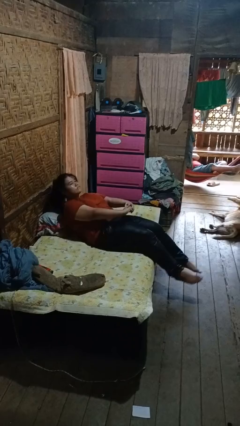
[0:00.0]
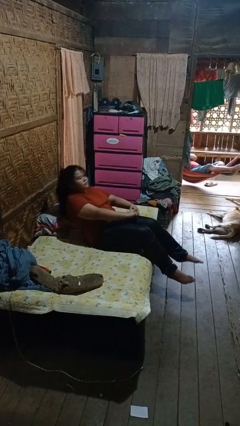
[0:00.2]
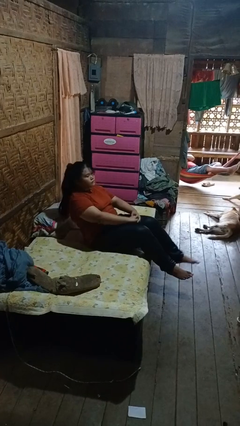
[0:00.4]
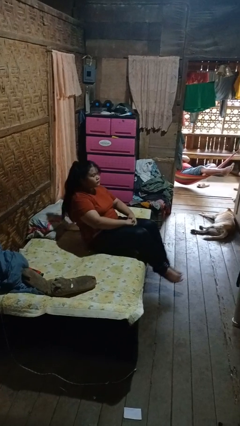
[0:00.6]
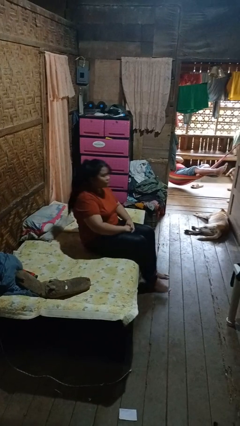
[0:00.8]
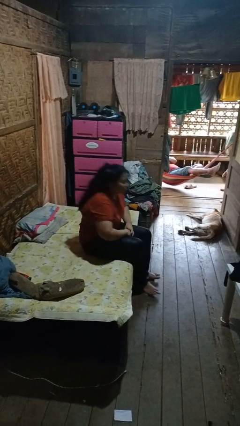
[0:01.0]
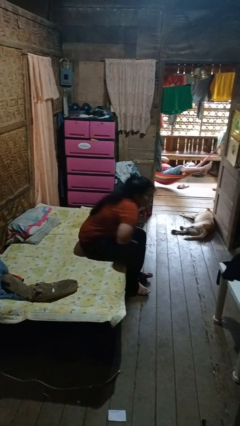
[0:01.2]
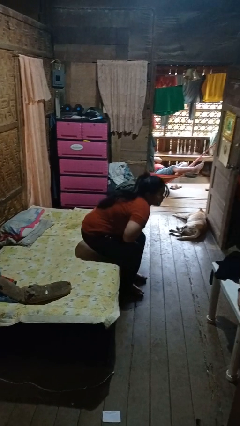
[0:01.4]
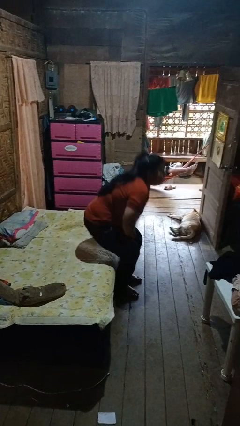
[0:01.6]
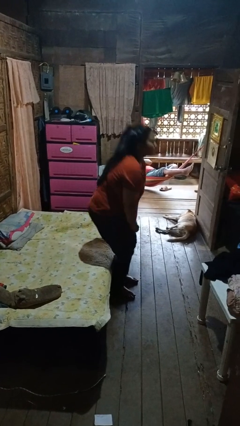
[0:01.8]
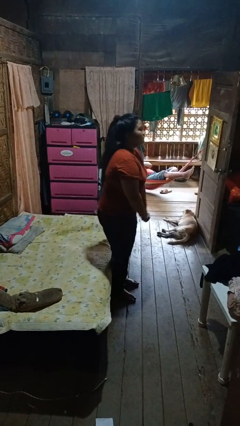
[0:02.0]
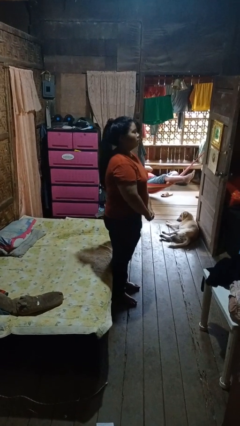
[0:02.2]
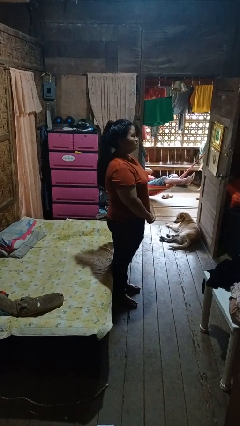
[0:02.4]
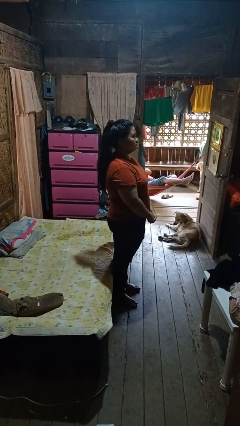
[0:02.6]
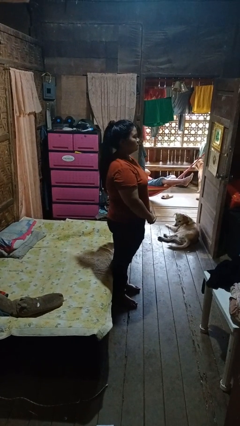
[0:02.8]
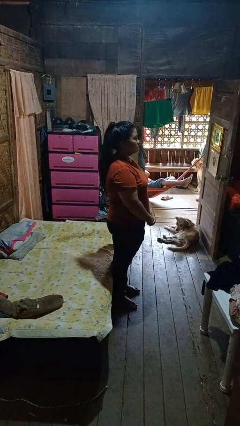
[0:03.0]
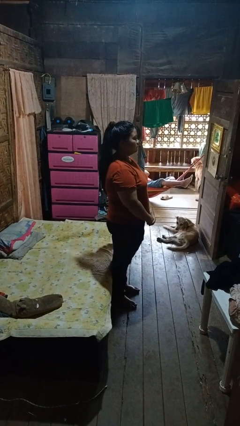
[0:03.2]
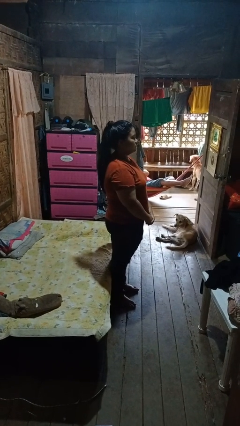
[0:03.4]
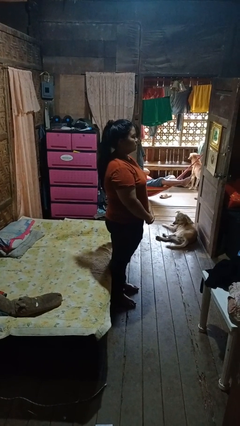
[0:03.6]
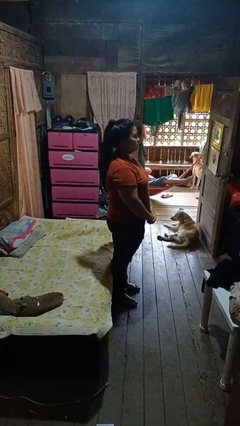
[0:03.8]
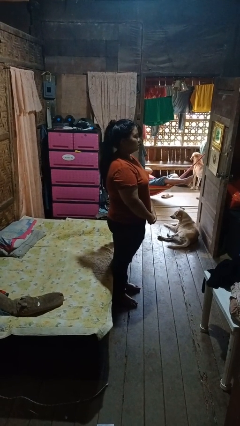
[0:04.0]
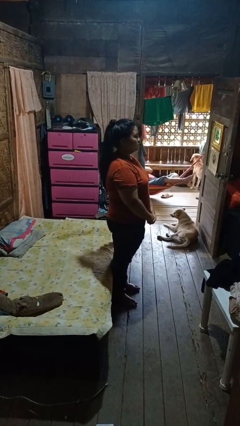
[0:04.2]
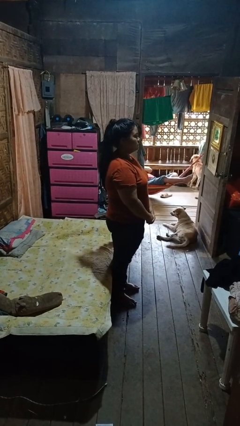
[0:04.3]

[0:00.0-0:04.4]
person stands up

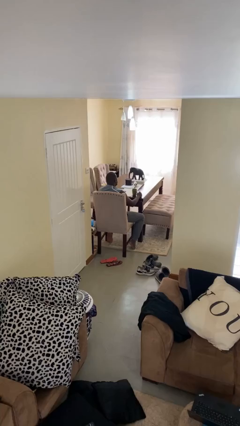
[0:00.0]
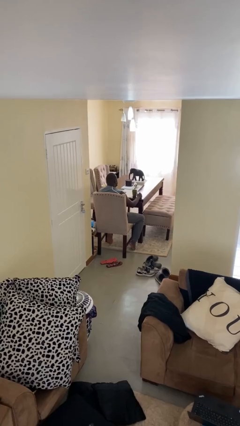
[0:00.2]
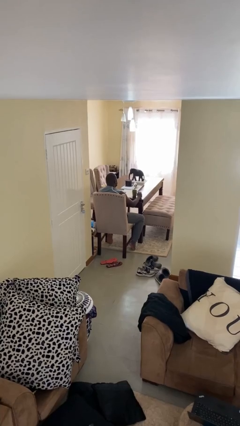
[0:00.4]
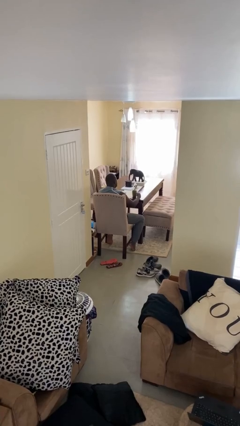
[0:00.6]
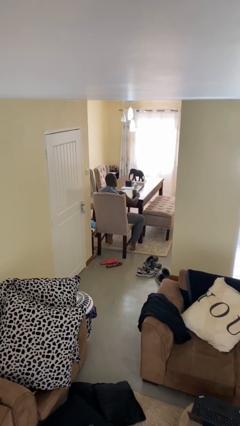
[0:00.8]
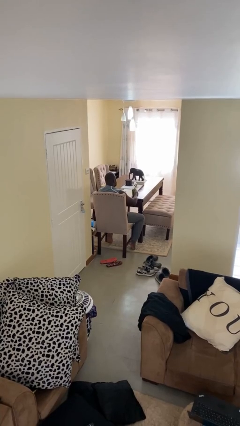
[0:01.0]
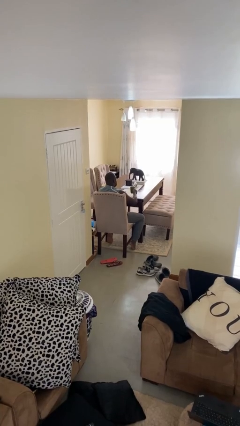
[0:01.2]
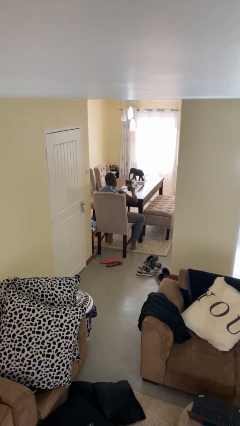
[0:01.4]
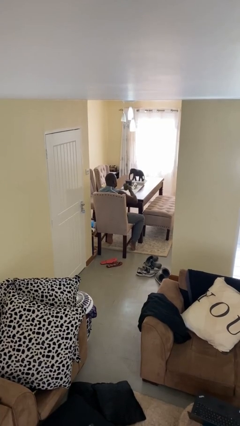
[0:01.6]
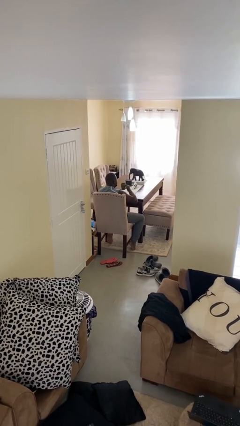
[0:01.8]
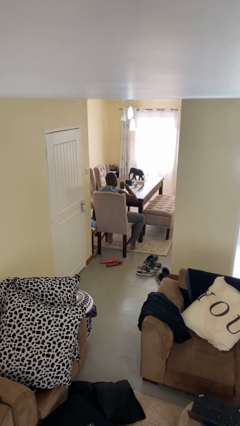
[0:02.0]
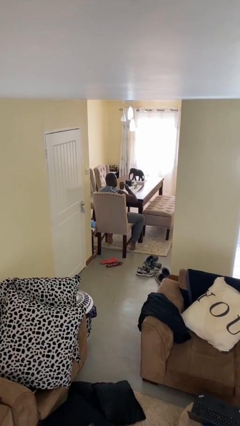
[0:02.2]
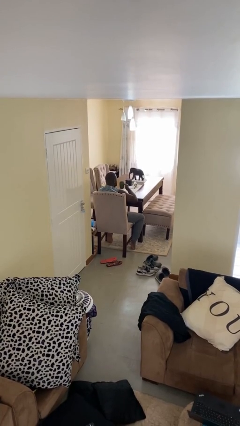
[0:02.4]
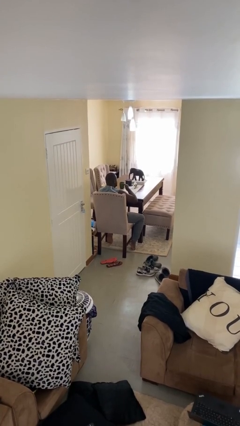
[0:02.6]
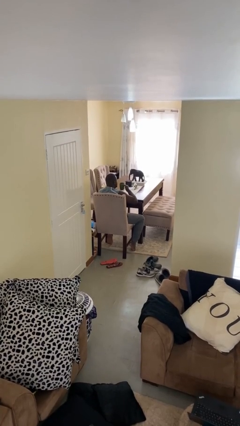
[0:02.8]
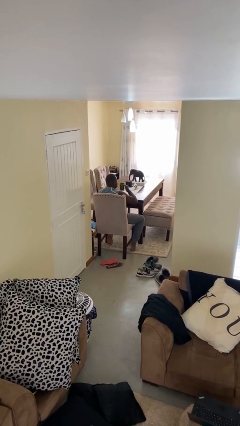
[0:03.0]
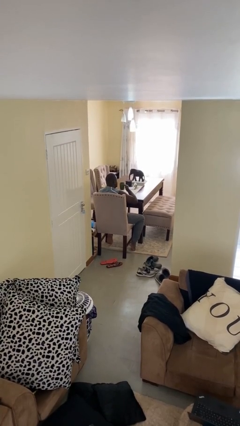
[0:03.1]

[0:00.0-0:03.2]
person picks up object from table

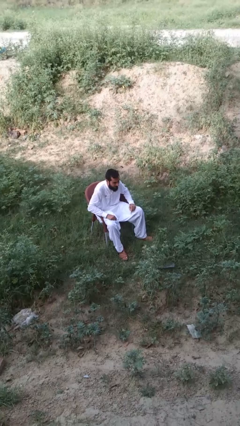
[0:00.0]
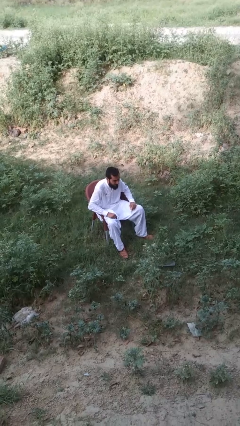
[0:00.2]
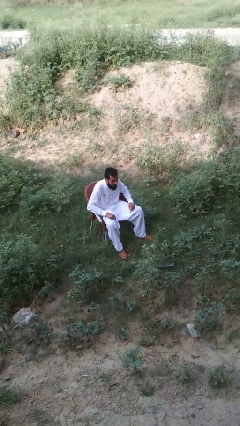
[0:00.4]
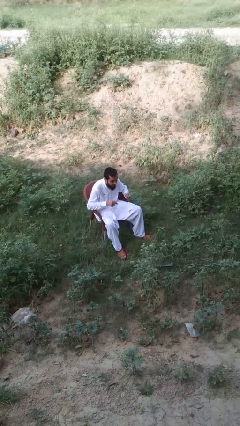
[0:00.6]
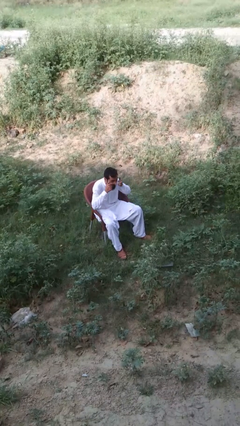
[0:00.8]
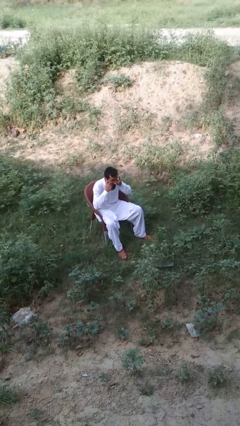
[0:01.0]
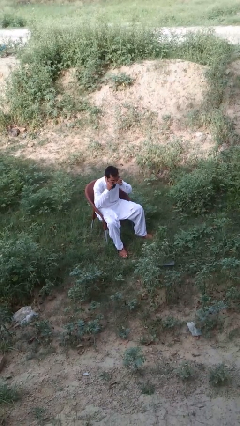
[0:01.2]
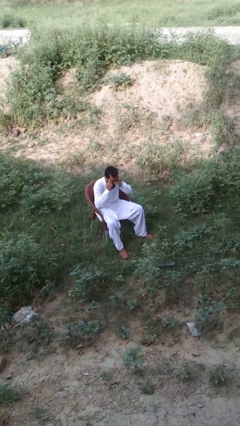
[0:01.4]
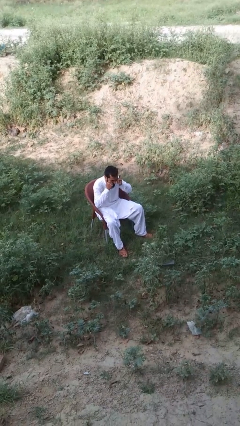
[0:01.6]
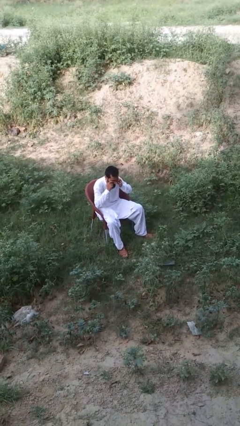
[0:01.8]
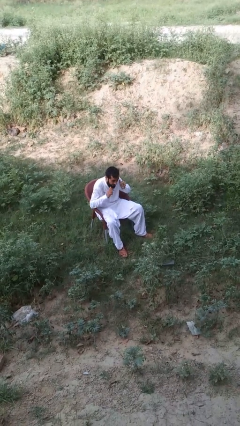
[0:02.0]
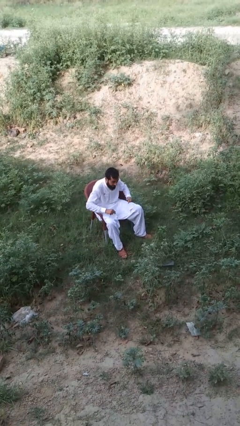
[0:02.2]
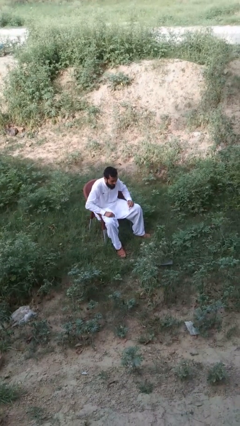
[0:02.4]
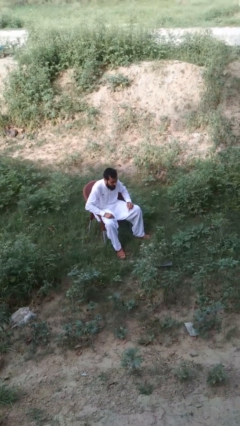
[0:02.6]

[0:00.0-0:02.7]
person rubs eyes

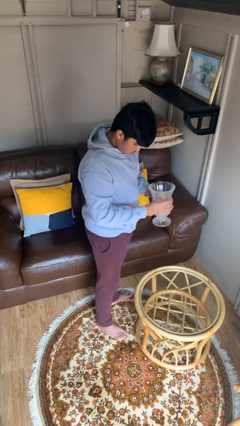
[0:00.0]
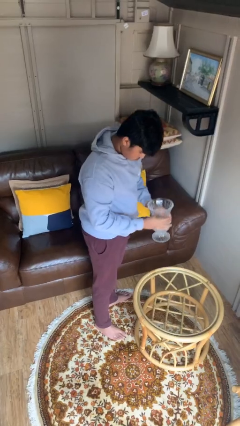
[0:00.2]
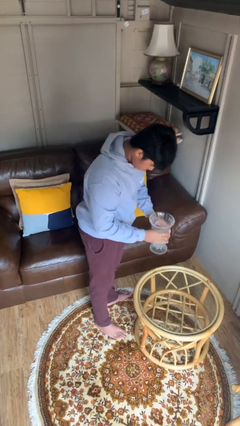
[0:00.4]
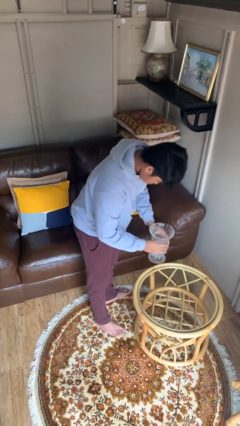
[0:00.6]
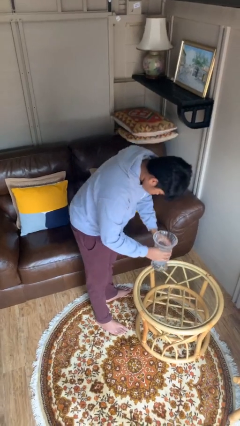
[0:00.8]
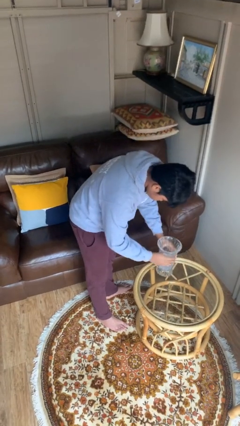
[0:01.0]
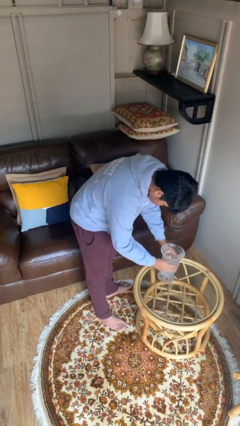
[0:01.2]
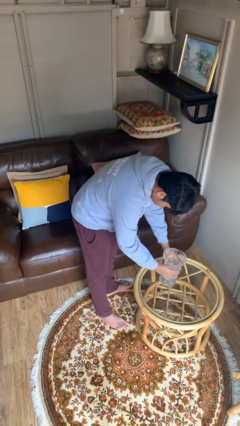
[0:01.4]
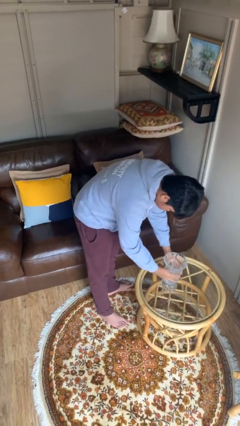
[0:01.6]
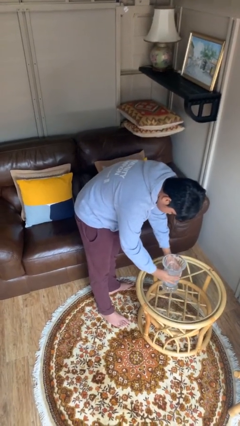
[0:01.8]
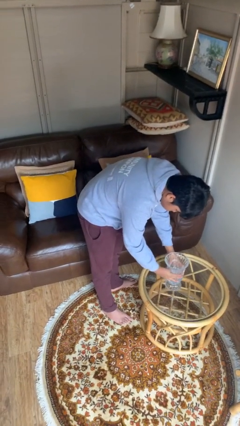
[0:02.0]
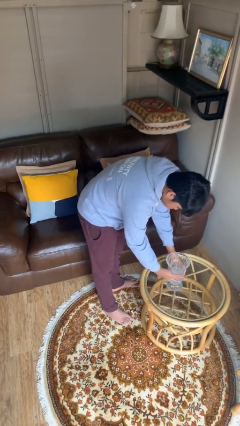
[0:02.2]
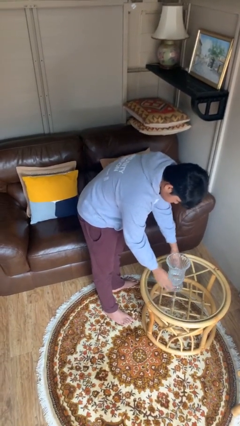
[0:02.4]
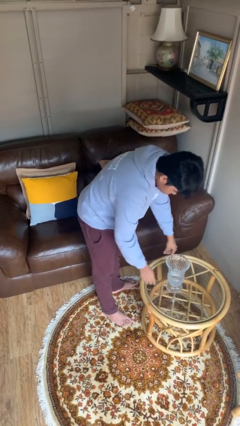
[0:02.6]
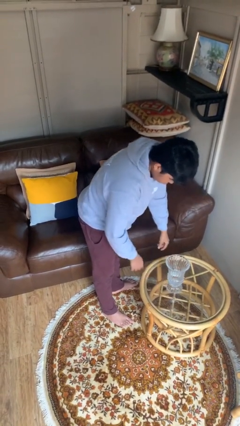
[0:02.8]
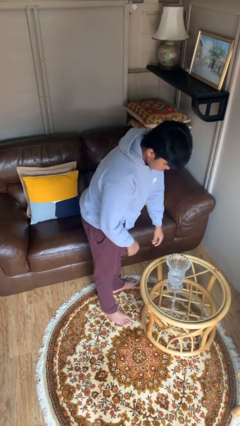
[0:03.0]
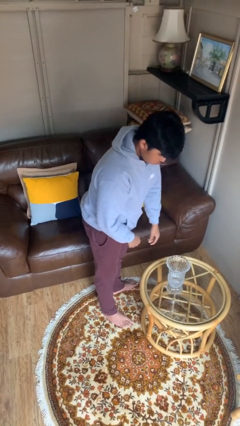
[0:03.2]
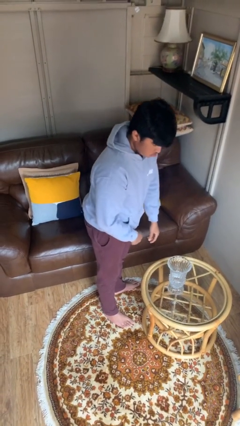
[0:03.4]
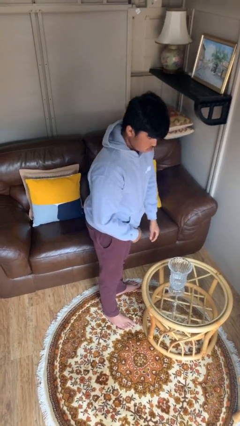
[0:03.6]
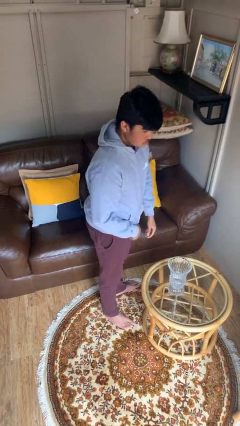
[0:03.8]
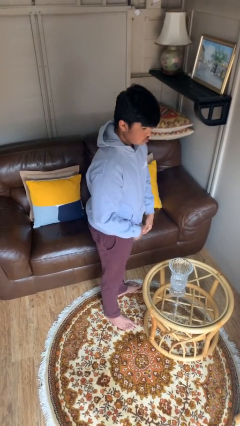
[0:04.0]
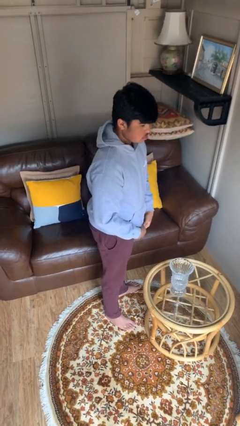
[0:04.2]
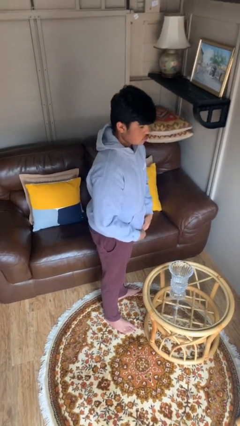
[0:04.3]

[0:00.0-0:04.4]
person puts down object on table

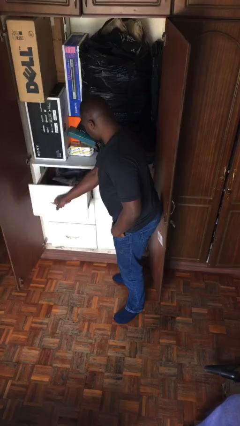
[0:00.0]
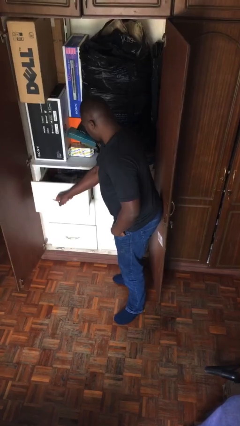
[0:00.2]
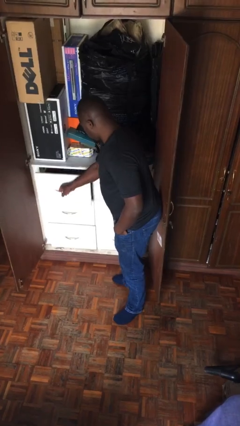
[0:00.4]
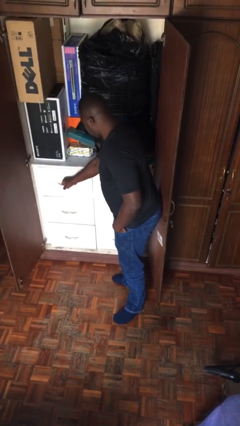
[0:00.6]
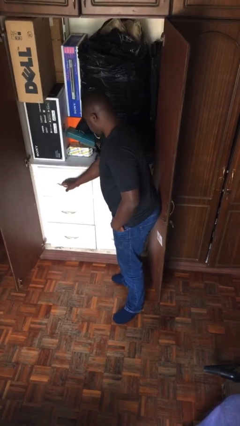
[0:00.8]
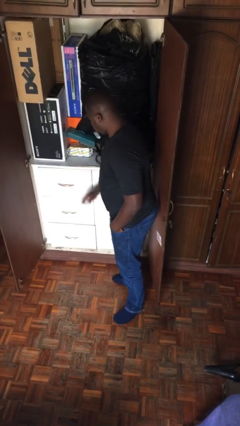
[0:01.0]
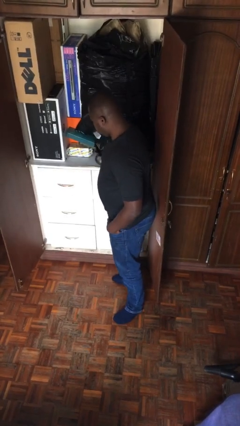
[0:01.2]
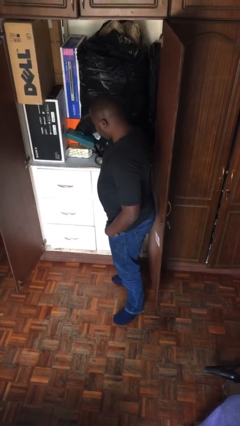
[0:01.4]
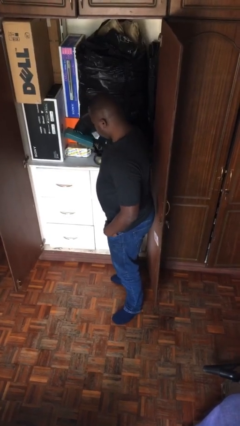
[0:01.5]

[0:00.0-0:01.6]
person closes dresser drawer

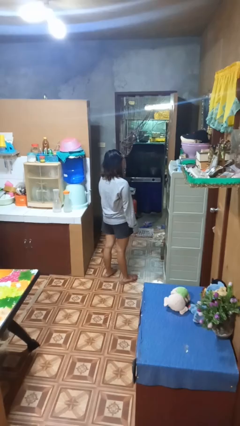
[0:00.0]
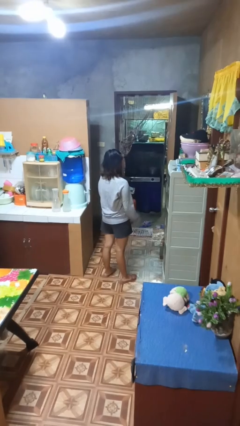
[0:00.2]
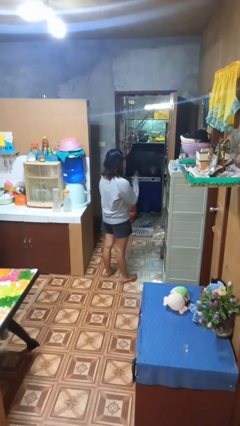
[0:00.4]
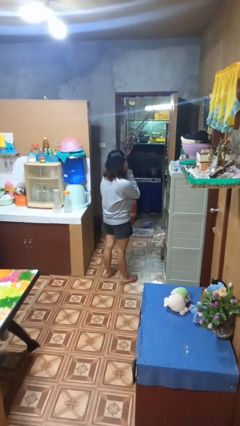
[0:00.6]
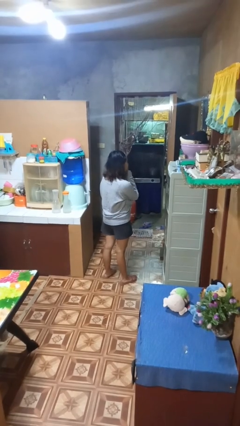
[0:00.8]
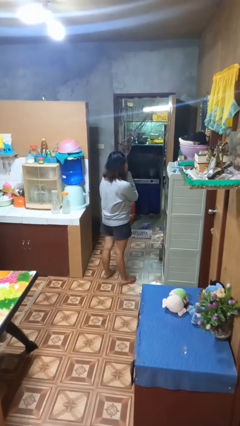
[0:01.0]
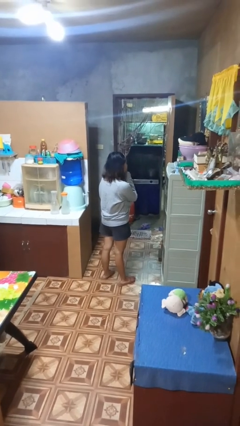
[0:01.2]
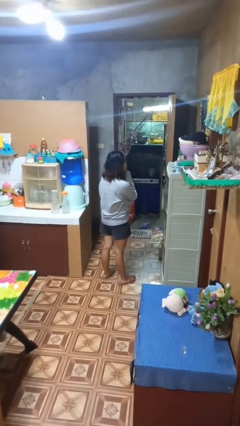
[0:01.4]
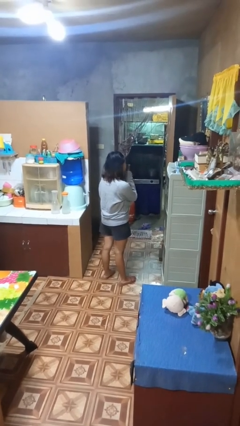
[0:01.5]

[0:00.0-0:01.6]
person gestures be quiet
